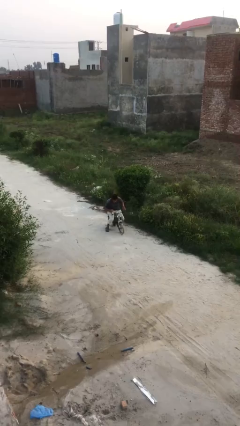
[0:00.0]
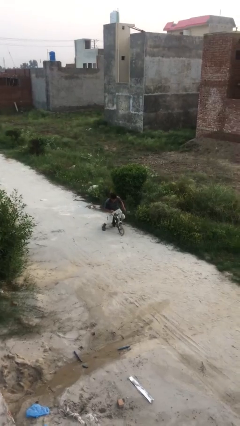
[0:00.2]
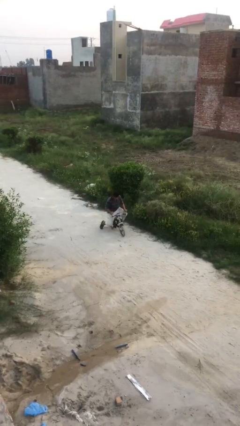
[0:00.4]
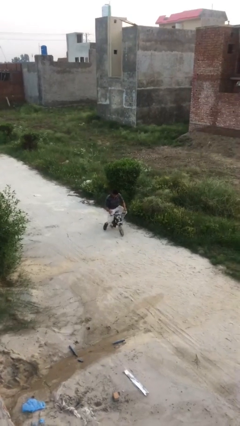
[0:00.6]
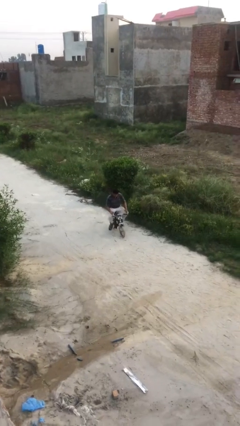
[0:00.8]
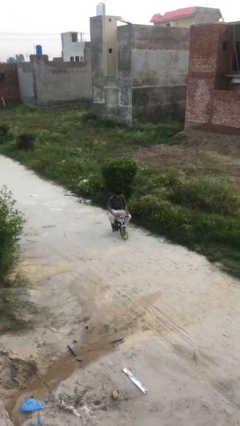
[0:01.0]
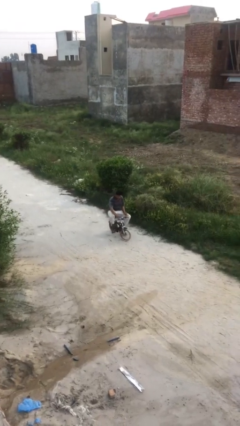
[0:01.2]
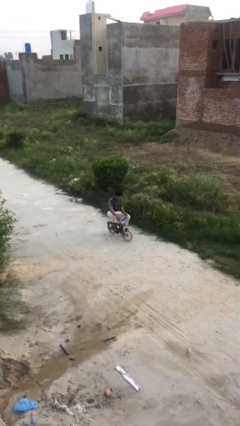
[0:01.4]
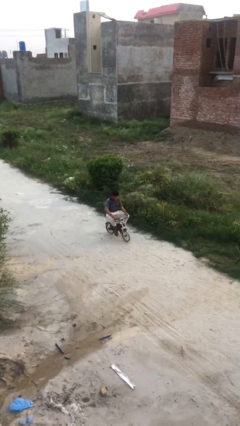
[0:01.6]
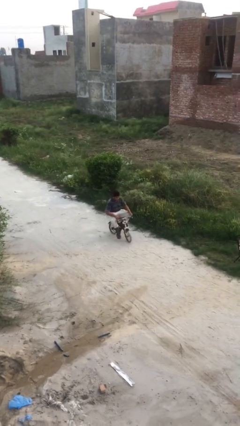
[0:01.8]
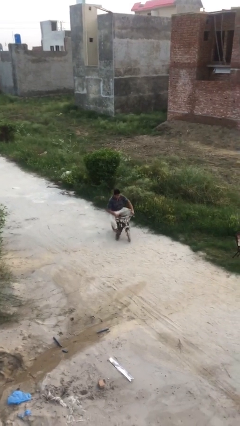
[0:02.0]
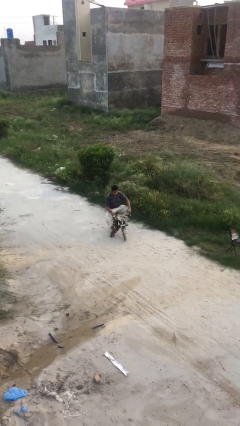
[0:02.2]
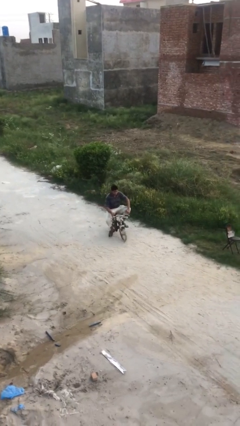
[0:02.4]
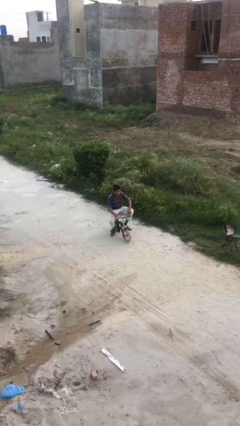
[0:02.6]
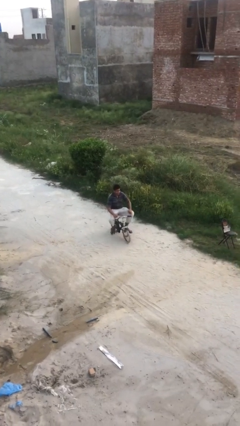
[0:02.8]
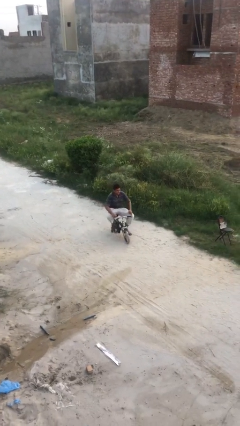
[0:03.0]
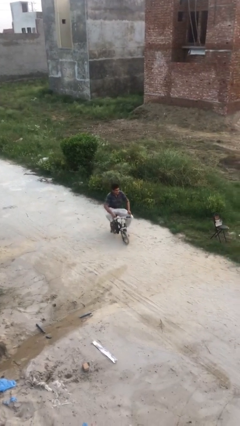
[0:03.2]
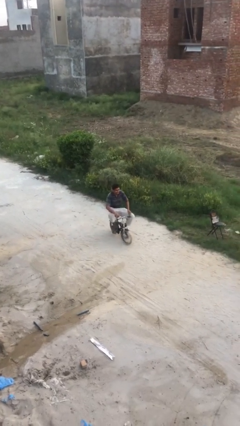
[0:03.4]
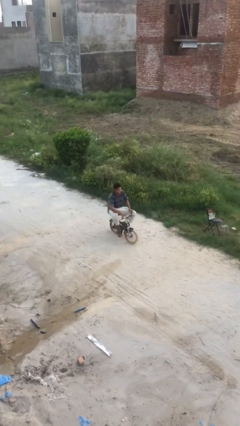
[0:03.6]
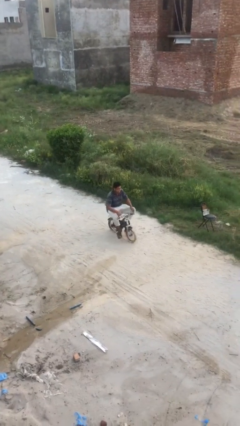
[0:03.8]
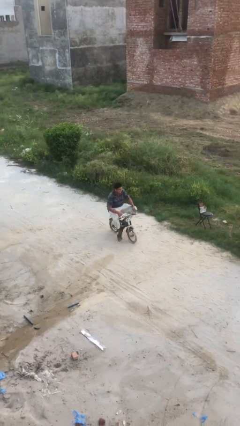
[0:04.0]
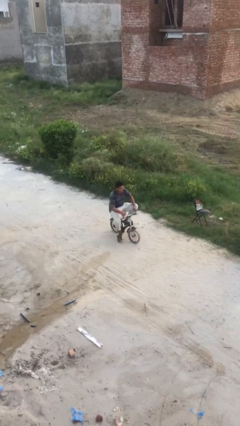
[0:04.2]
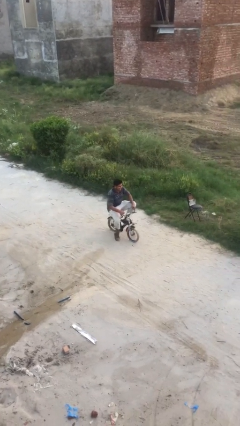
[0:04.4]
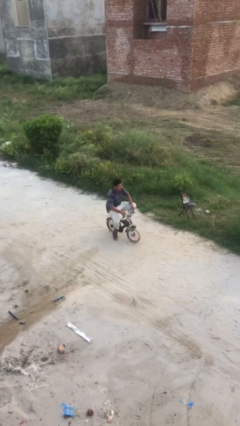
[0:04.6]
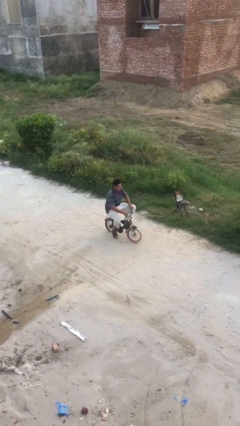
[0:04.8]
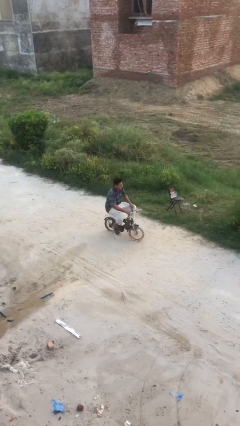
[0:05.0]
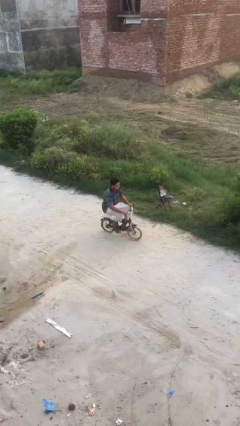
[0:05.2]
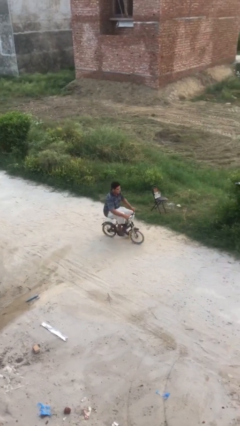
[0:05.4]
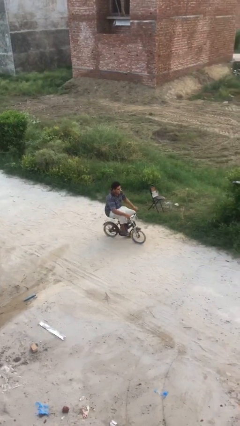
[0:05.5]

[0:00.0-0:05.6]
person rides bicycle

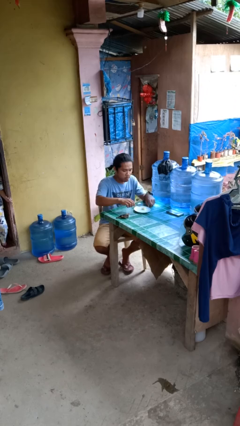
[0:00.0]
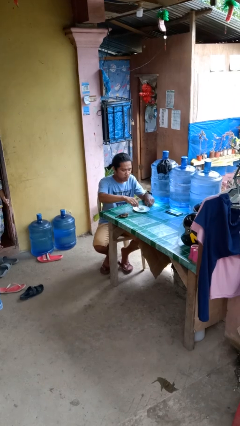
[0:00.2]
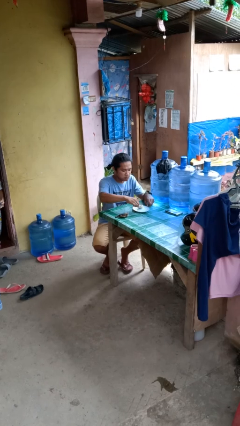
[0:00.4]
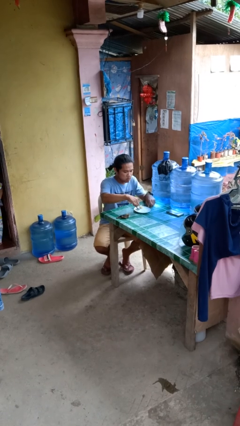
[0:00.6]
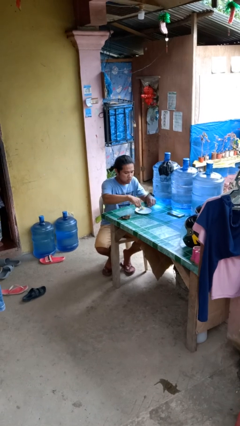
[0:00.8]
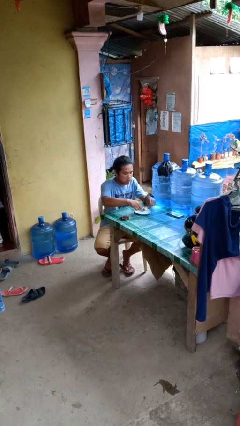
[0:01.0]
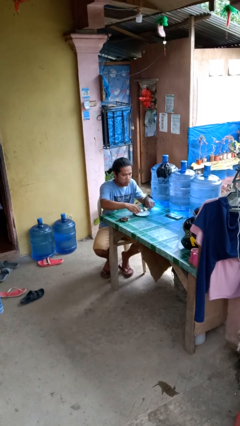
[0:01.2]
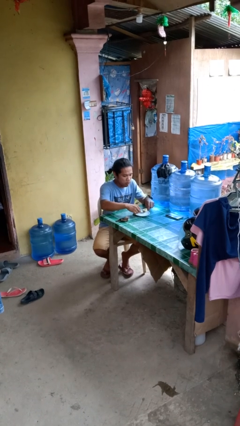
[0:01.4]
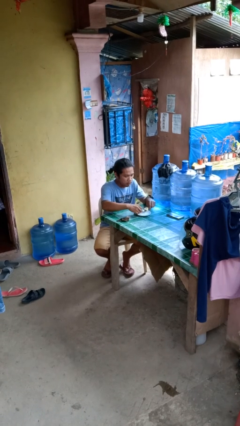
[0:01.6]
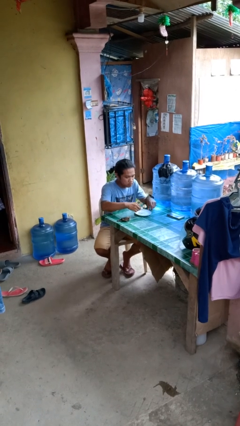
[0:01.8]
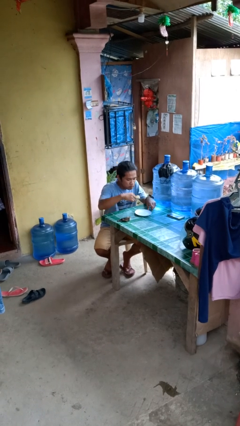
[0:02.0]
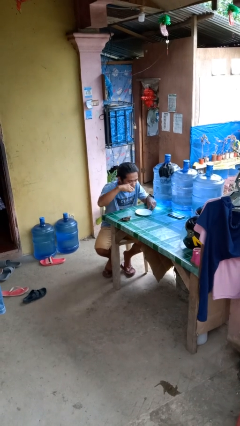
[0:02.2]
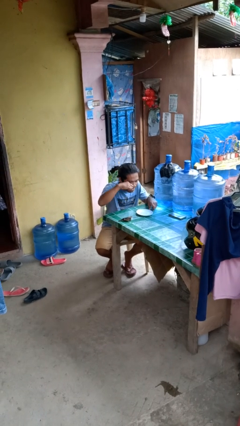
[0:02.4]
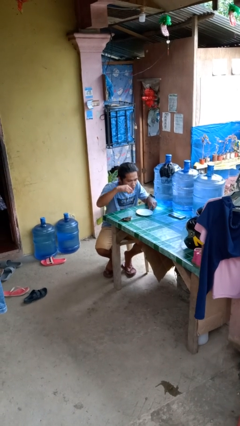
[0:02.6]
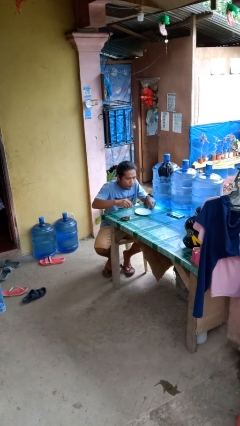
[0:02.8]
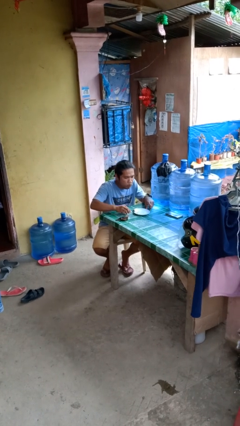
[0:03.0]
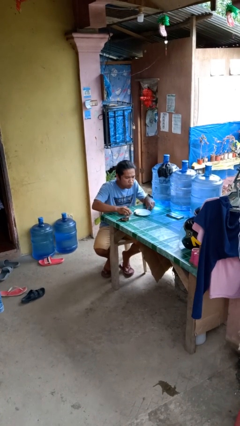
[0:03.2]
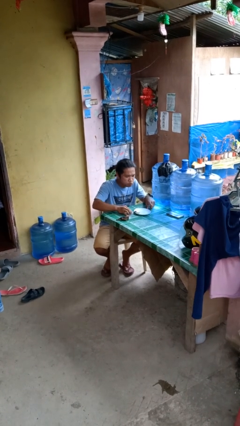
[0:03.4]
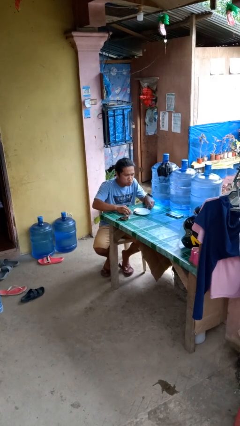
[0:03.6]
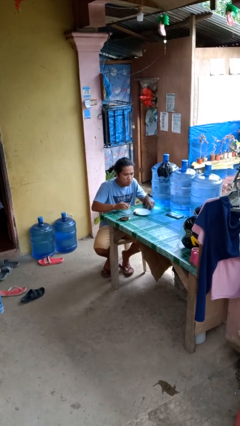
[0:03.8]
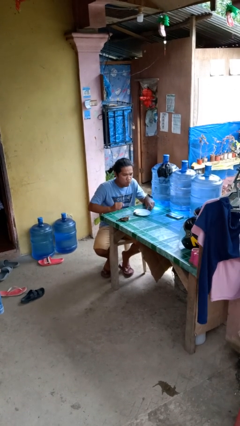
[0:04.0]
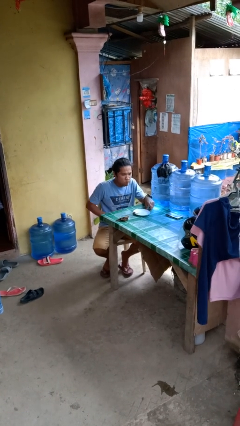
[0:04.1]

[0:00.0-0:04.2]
person eats with utensil

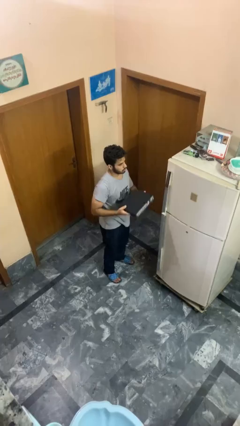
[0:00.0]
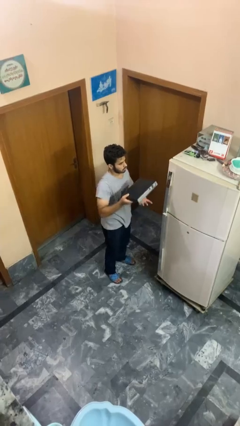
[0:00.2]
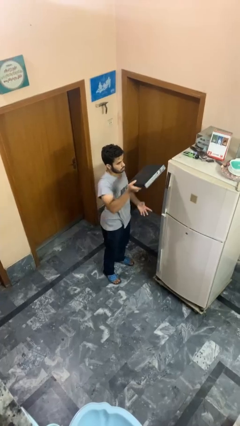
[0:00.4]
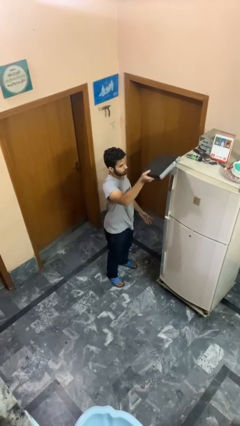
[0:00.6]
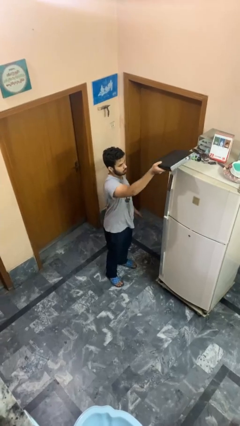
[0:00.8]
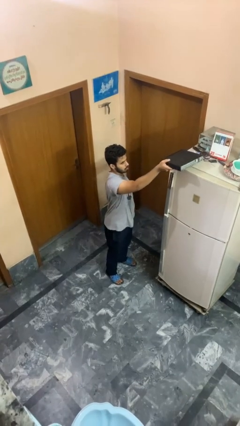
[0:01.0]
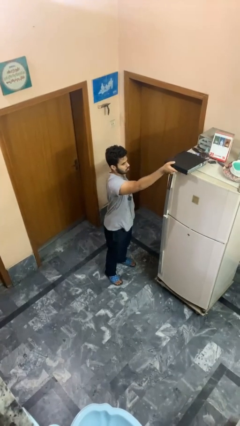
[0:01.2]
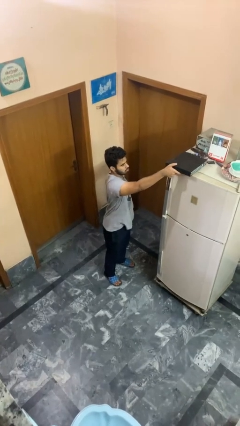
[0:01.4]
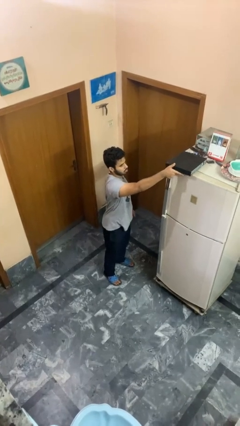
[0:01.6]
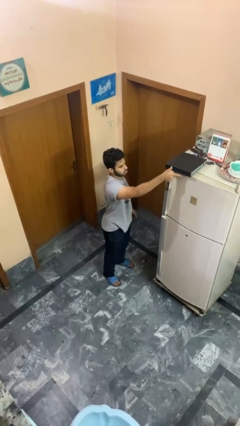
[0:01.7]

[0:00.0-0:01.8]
person puts down object on countertop

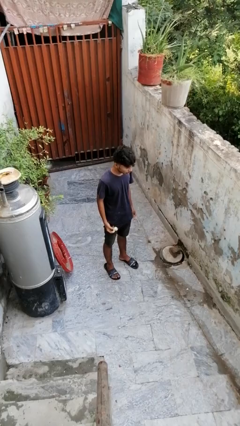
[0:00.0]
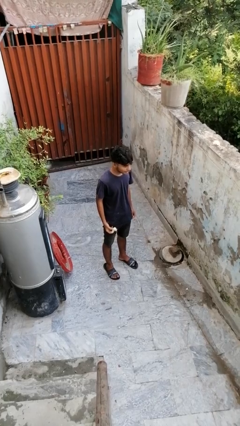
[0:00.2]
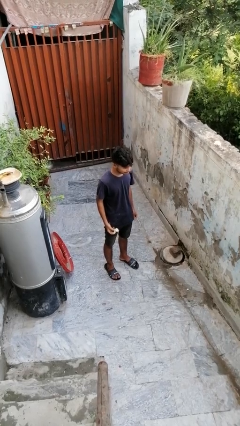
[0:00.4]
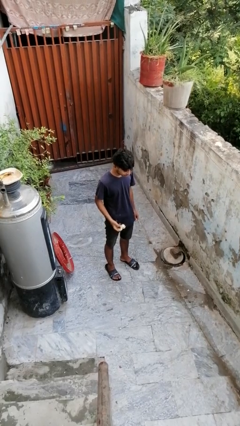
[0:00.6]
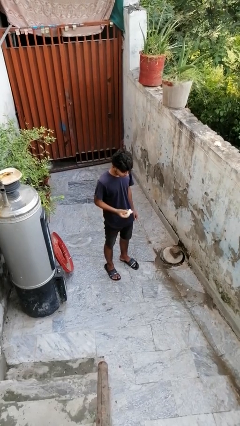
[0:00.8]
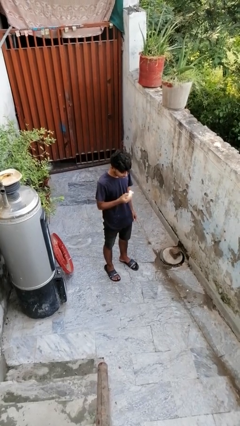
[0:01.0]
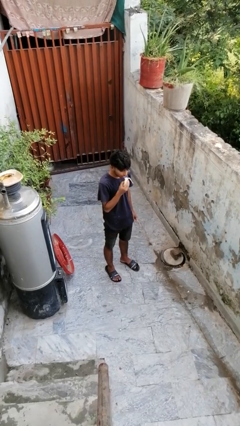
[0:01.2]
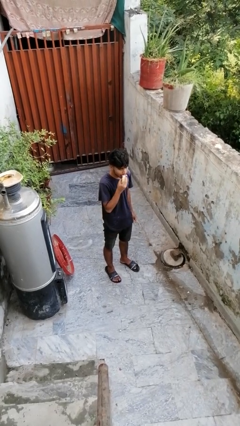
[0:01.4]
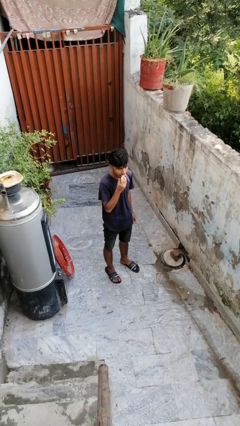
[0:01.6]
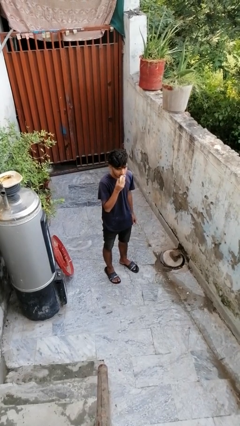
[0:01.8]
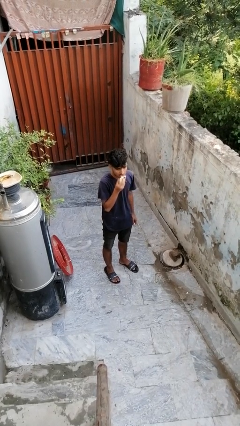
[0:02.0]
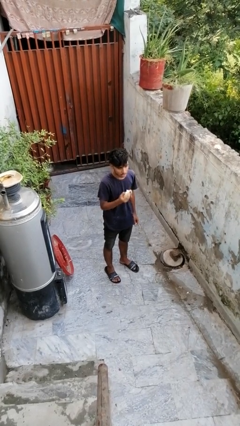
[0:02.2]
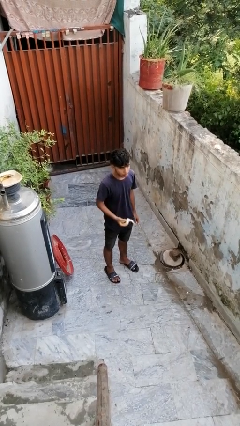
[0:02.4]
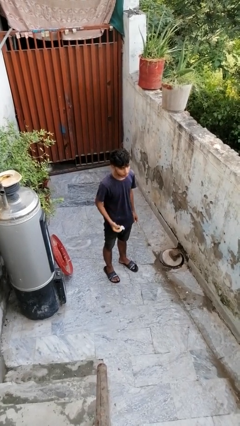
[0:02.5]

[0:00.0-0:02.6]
person eats banana

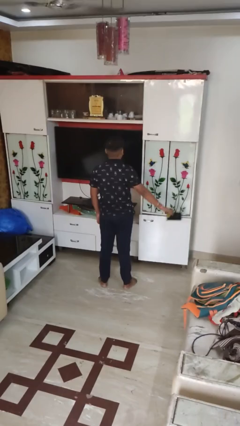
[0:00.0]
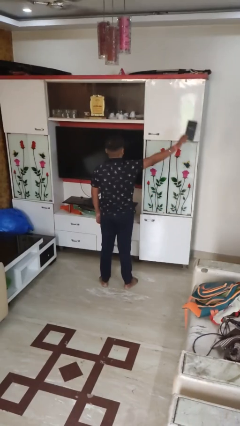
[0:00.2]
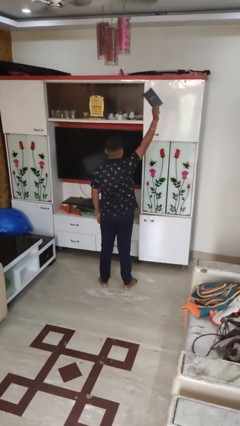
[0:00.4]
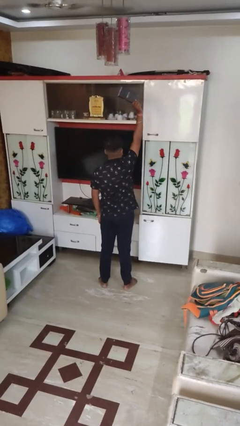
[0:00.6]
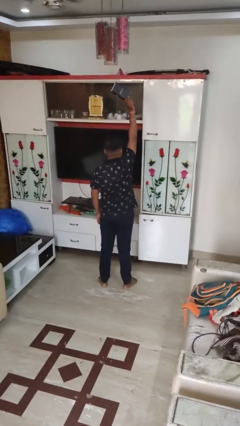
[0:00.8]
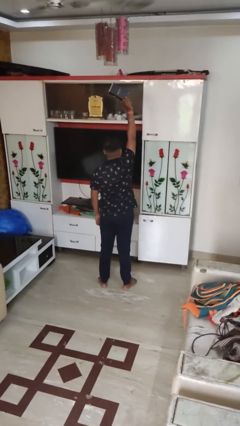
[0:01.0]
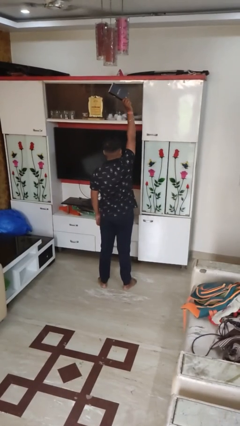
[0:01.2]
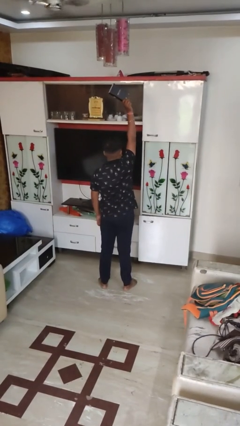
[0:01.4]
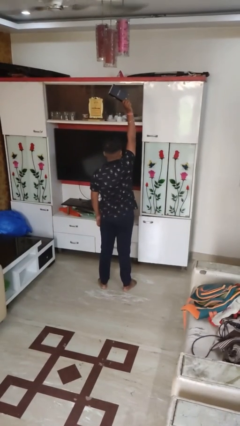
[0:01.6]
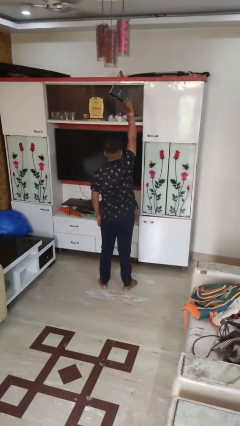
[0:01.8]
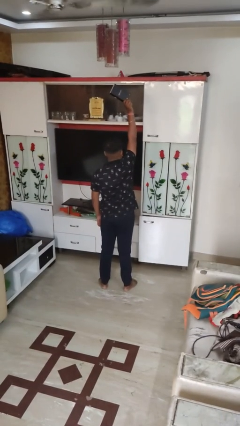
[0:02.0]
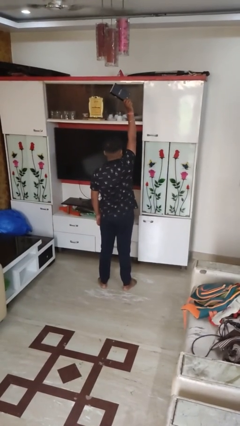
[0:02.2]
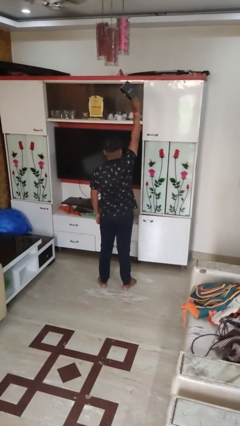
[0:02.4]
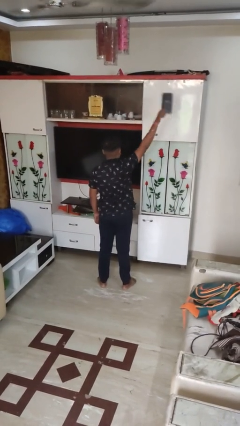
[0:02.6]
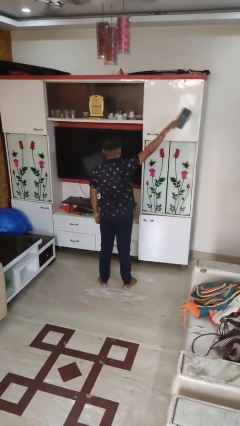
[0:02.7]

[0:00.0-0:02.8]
person holds object above head
